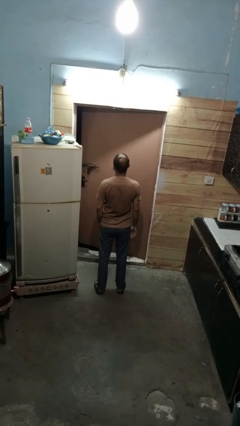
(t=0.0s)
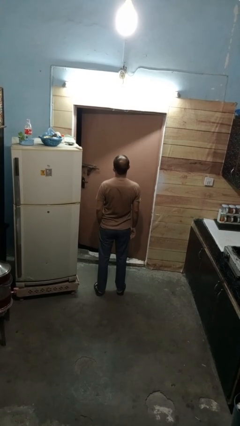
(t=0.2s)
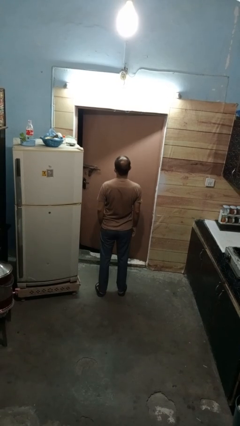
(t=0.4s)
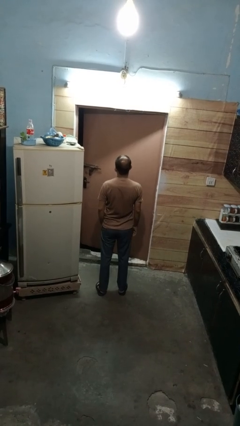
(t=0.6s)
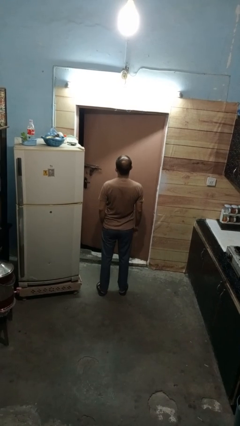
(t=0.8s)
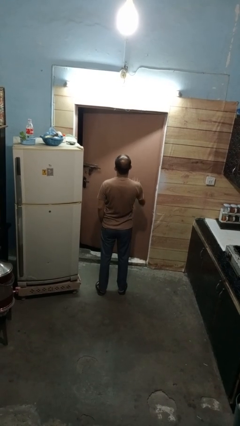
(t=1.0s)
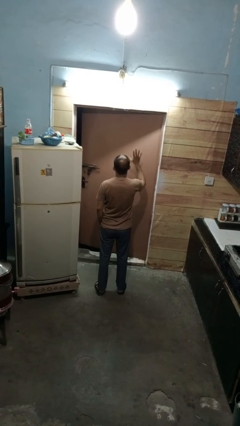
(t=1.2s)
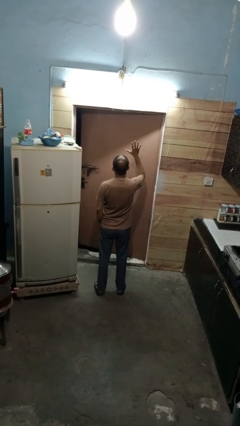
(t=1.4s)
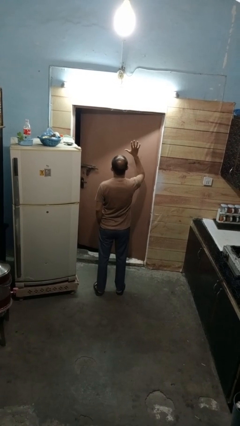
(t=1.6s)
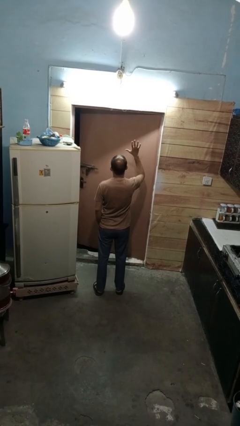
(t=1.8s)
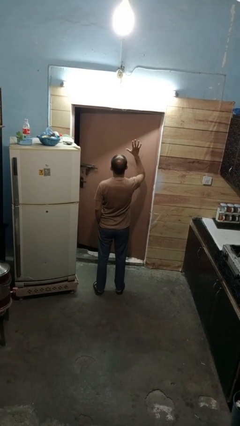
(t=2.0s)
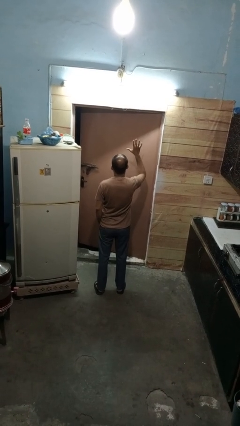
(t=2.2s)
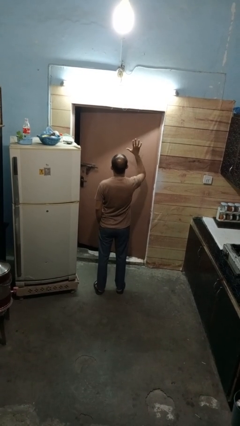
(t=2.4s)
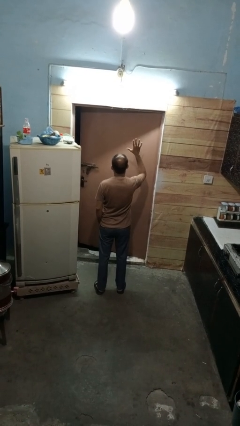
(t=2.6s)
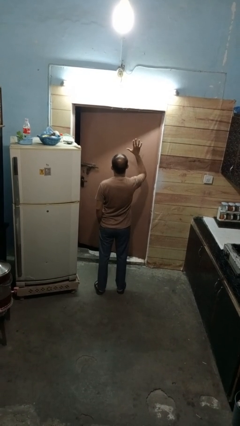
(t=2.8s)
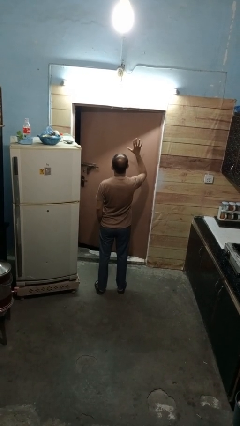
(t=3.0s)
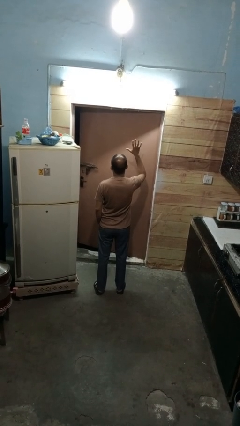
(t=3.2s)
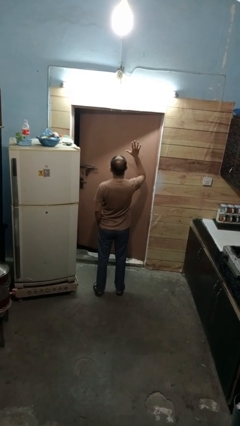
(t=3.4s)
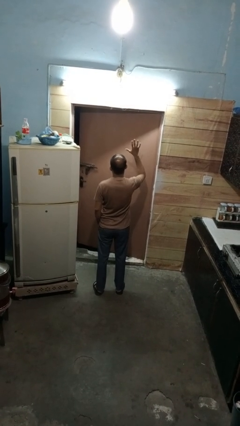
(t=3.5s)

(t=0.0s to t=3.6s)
person gestures number five

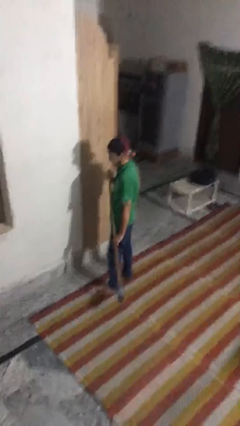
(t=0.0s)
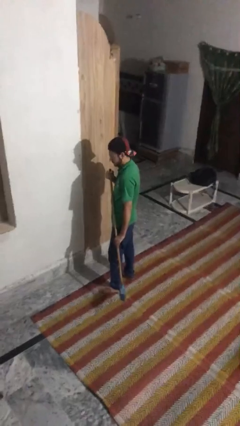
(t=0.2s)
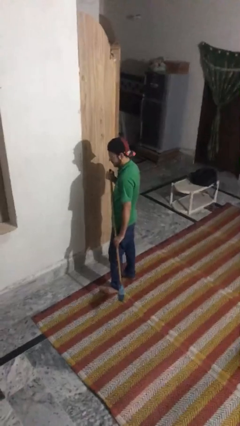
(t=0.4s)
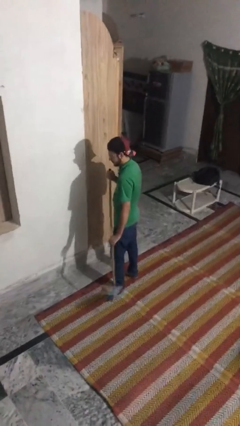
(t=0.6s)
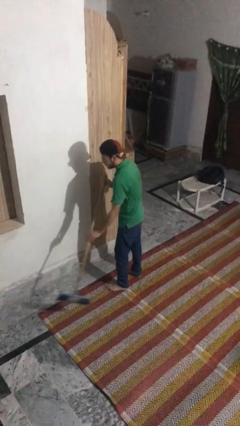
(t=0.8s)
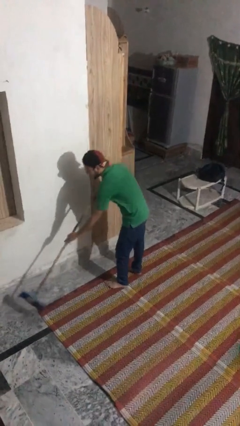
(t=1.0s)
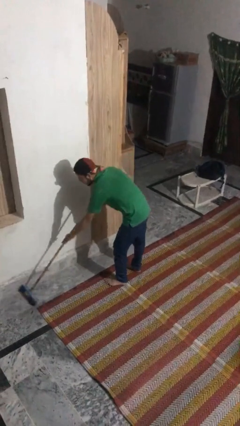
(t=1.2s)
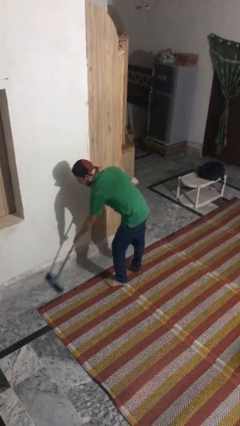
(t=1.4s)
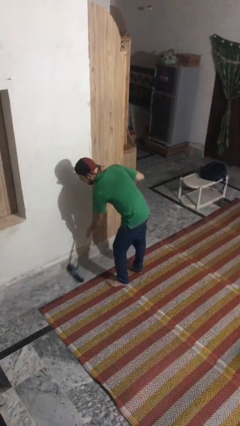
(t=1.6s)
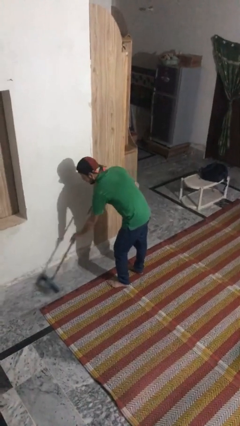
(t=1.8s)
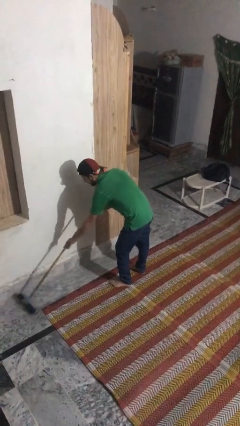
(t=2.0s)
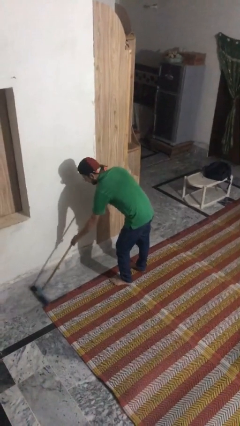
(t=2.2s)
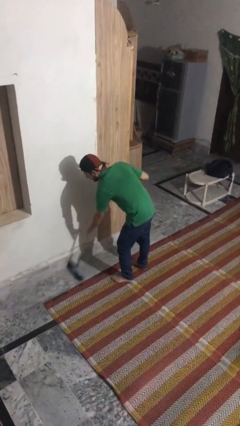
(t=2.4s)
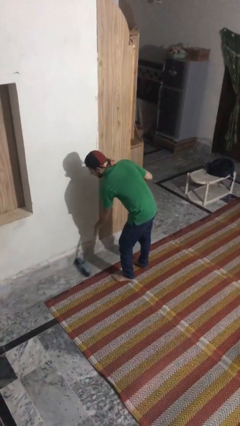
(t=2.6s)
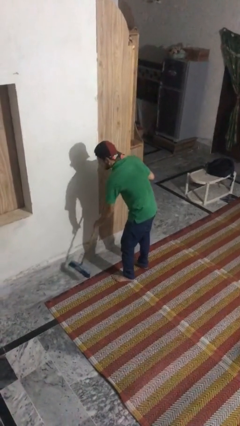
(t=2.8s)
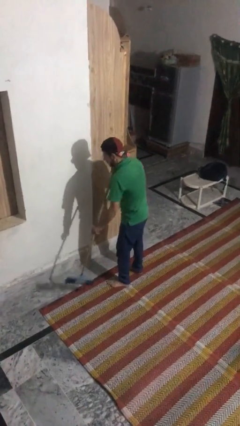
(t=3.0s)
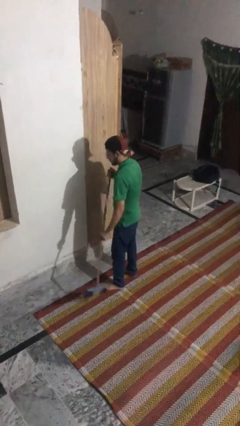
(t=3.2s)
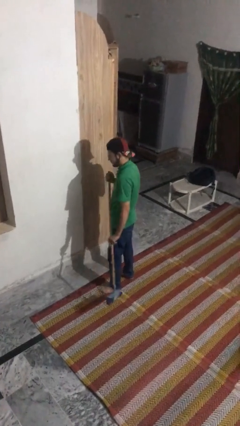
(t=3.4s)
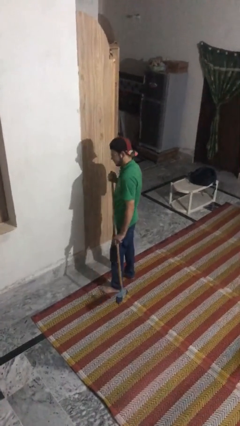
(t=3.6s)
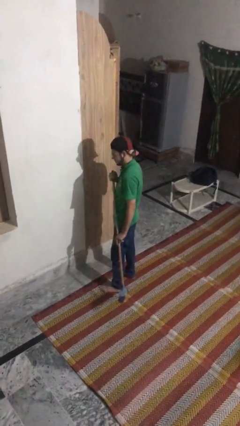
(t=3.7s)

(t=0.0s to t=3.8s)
person sweeps floor

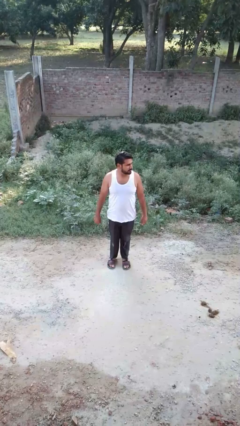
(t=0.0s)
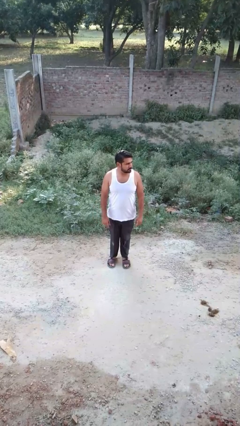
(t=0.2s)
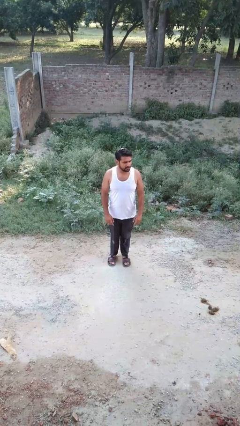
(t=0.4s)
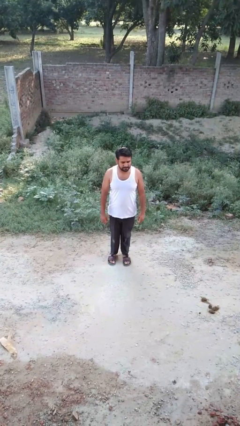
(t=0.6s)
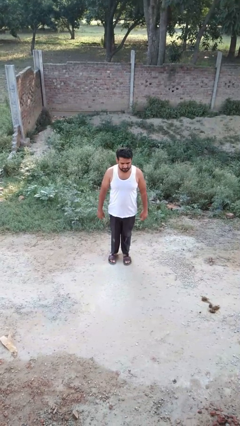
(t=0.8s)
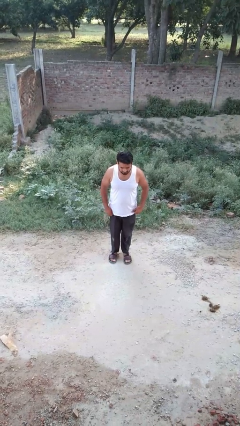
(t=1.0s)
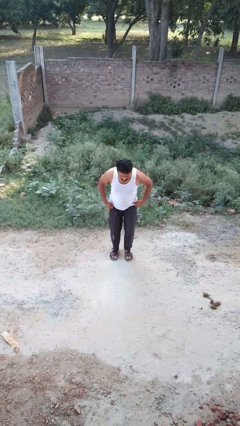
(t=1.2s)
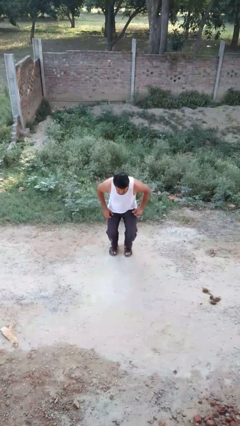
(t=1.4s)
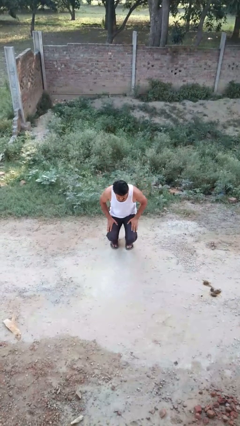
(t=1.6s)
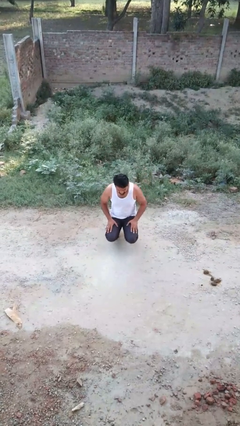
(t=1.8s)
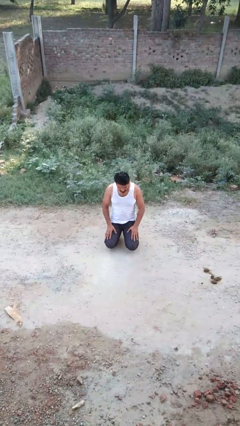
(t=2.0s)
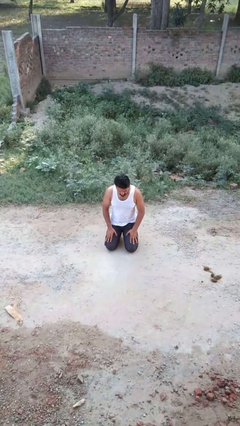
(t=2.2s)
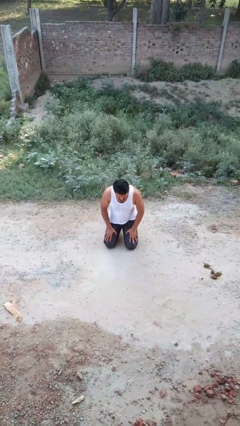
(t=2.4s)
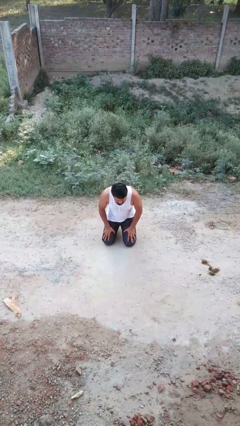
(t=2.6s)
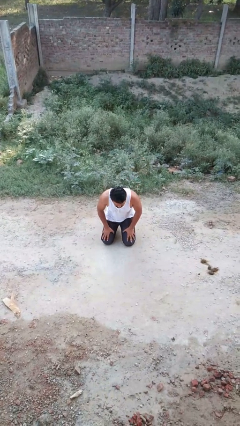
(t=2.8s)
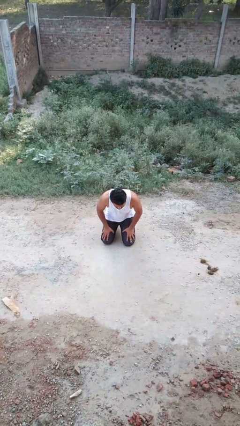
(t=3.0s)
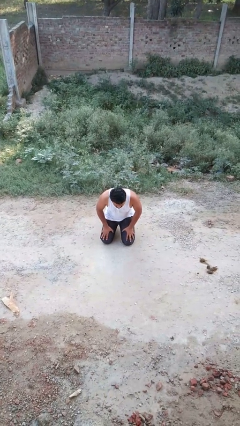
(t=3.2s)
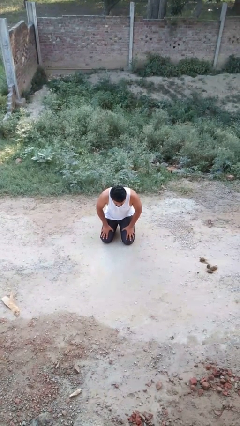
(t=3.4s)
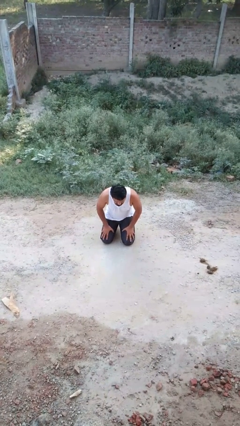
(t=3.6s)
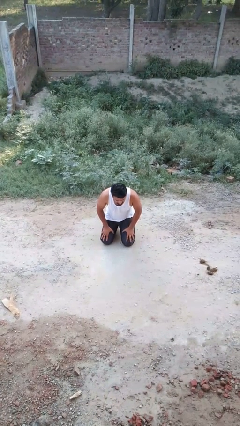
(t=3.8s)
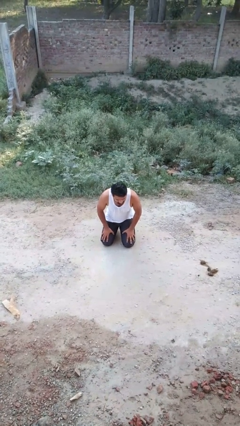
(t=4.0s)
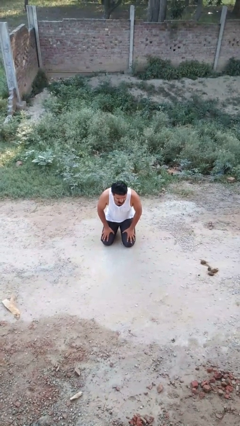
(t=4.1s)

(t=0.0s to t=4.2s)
person kneels

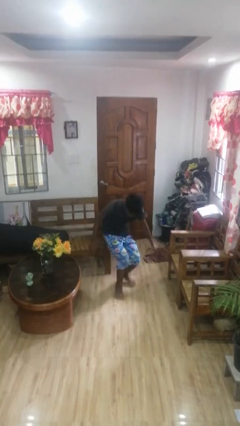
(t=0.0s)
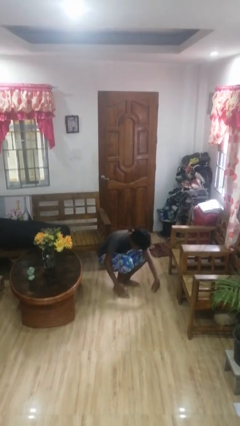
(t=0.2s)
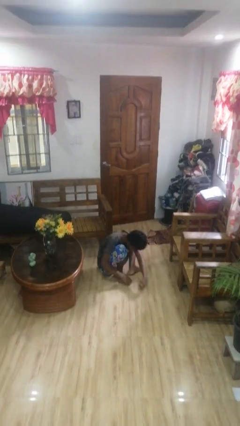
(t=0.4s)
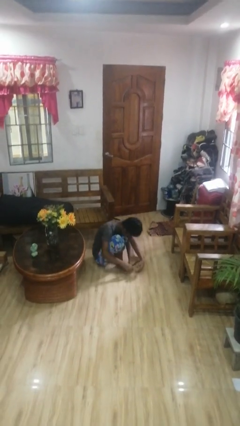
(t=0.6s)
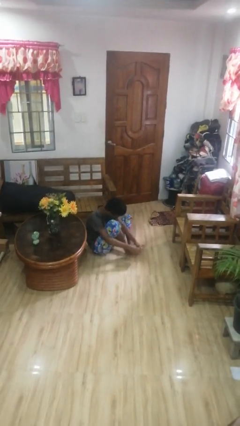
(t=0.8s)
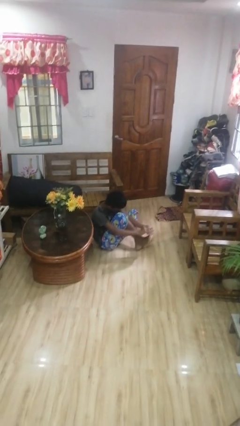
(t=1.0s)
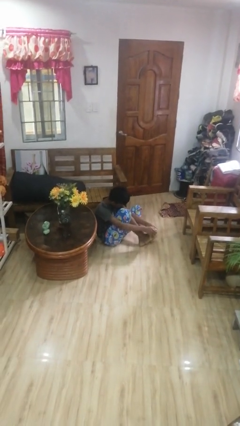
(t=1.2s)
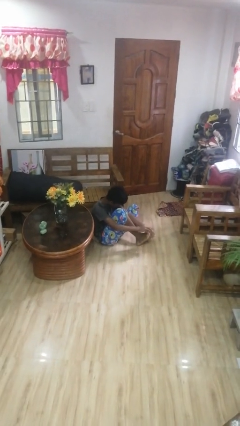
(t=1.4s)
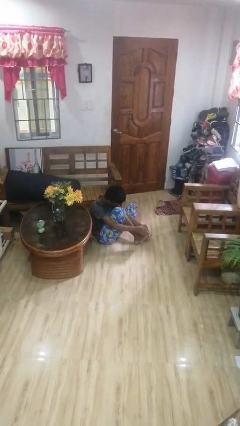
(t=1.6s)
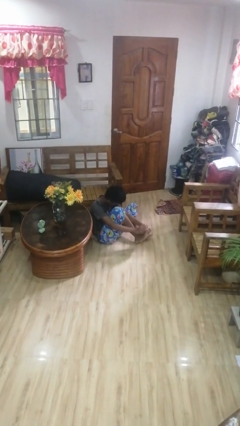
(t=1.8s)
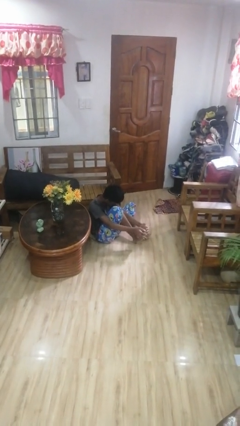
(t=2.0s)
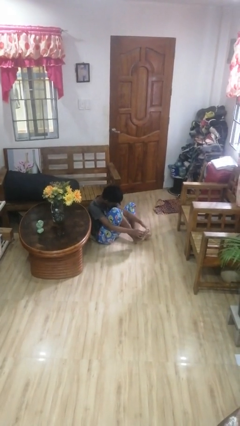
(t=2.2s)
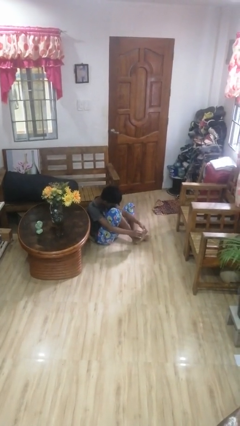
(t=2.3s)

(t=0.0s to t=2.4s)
person lies down on floor

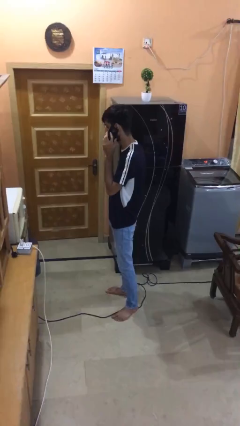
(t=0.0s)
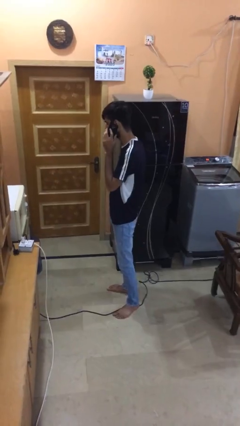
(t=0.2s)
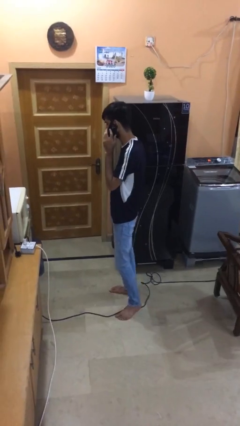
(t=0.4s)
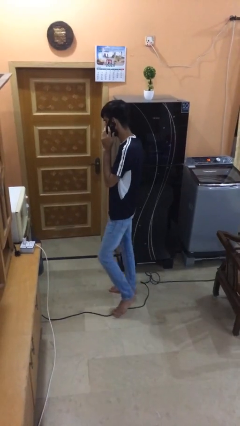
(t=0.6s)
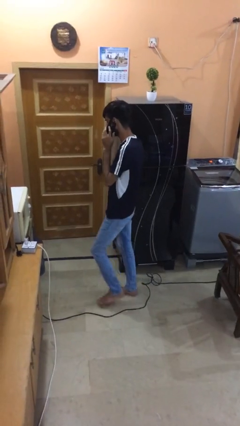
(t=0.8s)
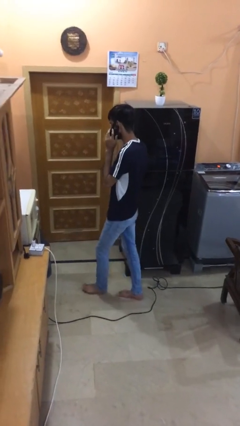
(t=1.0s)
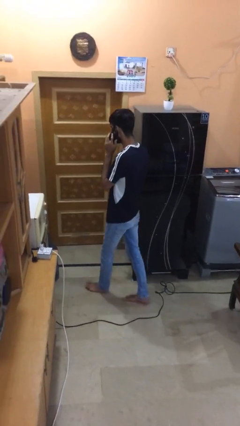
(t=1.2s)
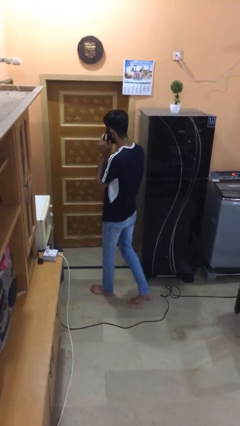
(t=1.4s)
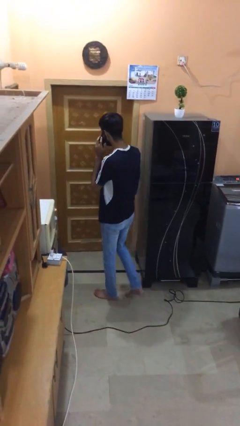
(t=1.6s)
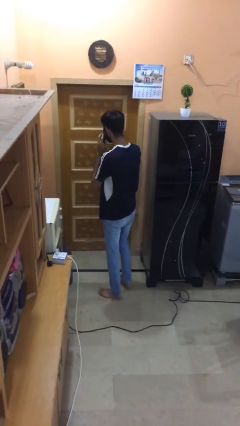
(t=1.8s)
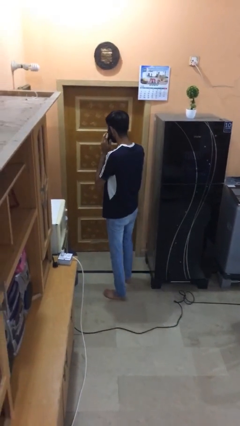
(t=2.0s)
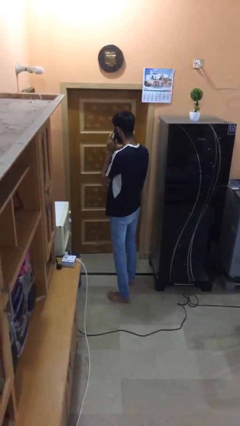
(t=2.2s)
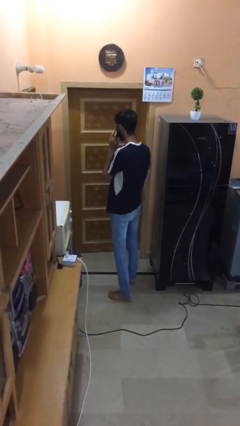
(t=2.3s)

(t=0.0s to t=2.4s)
person opens facility door

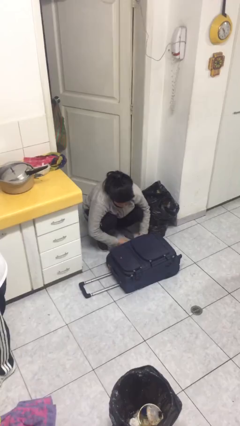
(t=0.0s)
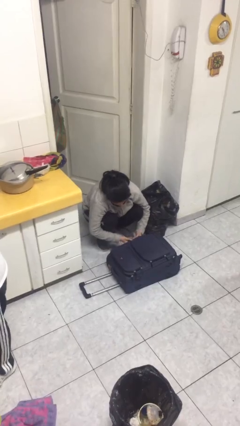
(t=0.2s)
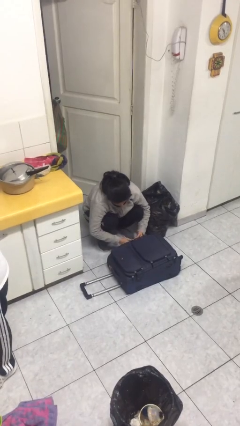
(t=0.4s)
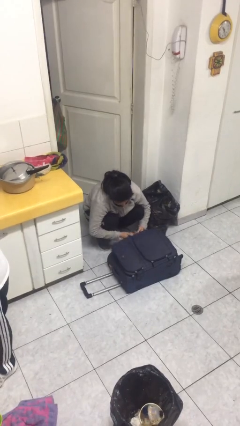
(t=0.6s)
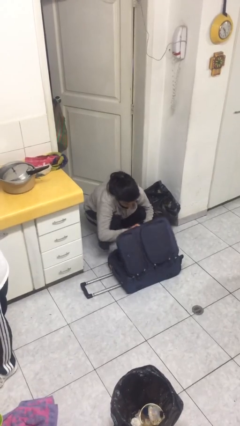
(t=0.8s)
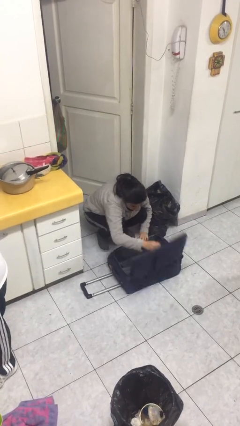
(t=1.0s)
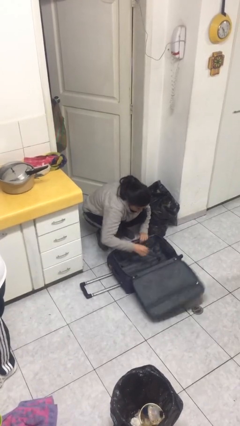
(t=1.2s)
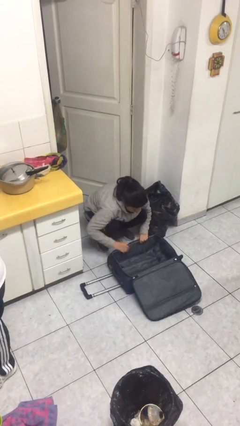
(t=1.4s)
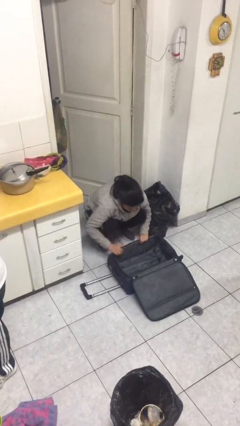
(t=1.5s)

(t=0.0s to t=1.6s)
person opens suitcase
